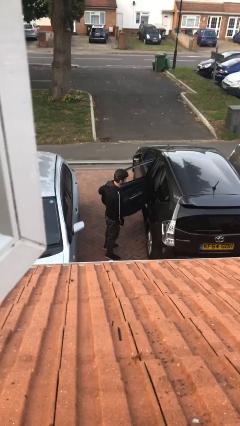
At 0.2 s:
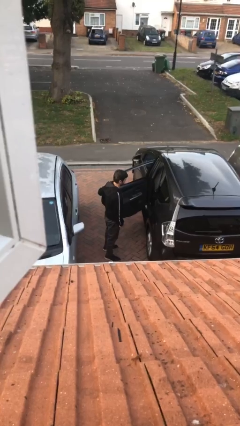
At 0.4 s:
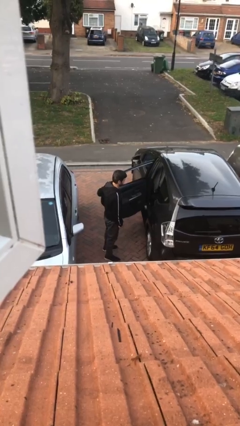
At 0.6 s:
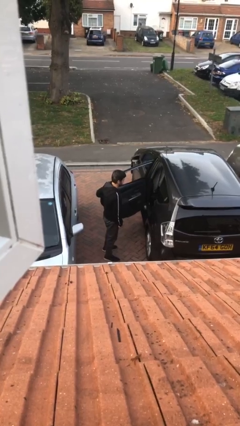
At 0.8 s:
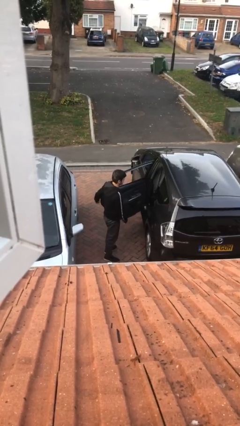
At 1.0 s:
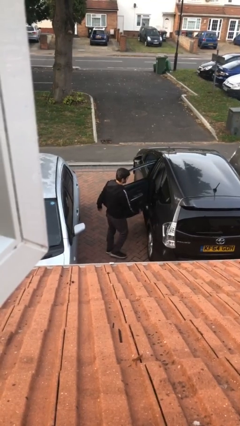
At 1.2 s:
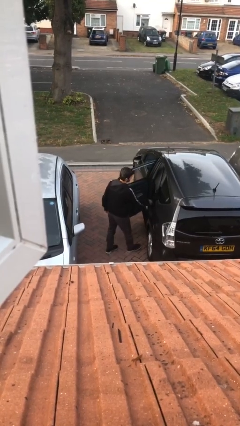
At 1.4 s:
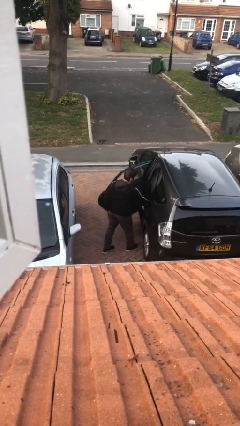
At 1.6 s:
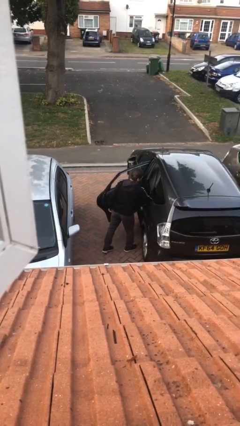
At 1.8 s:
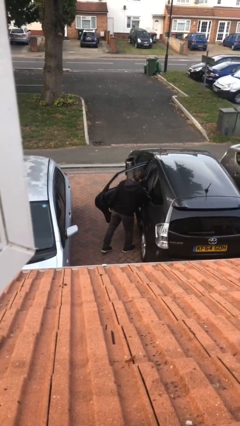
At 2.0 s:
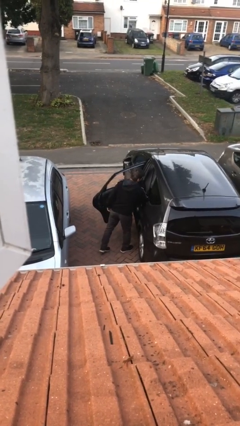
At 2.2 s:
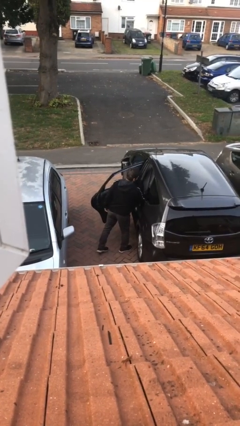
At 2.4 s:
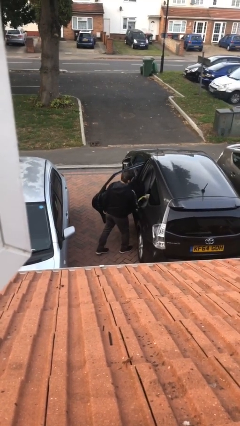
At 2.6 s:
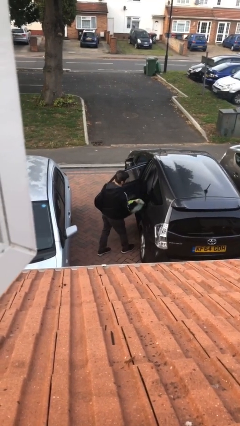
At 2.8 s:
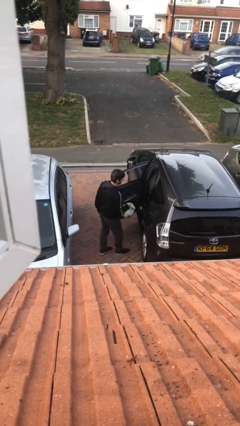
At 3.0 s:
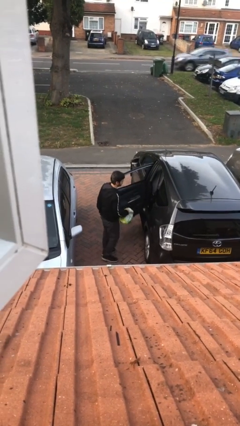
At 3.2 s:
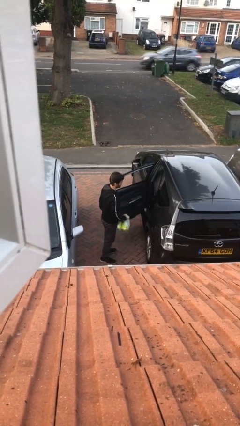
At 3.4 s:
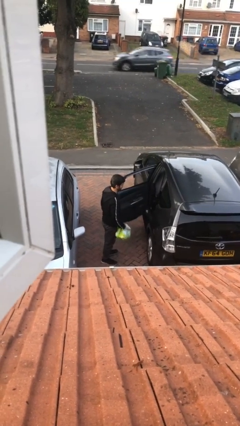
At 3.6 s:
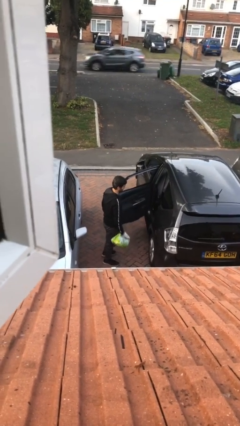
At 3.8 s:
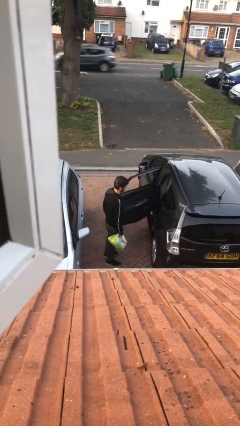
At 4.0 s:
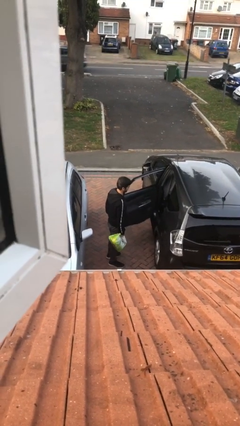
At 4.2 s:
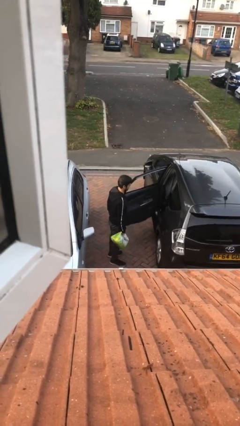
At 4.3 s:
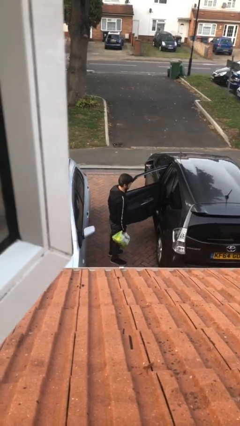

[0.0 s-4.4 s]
person unloads car

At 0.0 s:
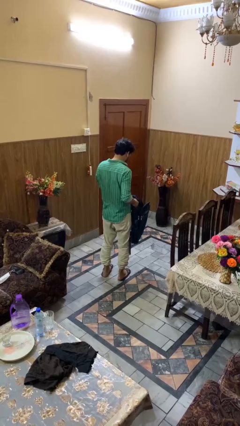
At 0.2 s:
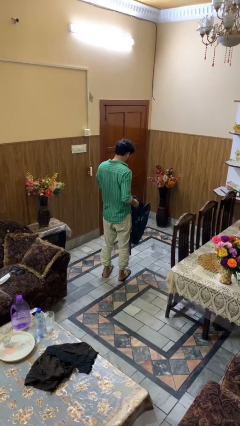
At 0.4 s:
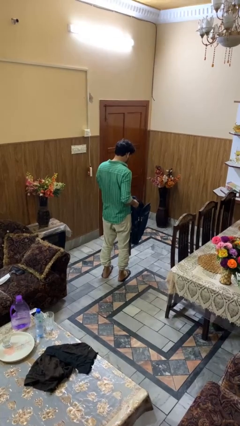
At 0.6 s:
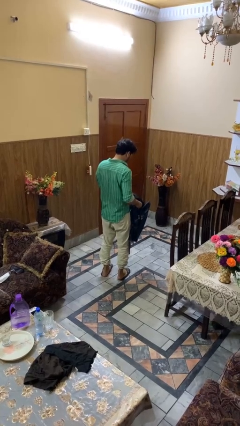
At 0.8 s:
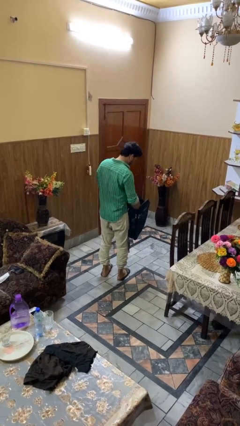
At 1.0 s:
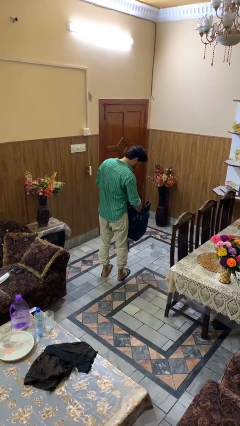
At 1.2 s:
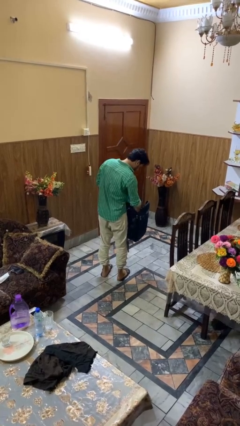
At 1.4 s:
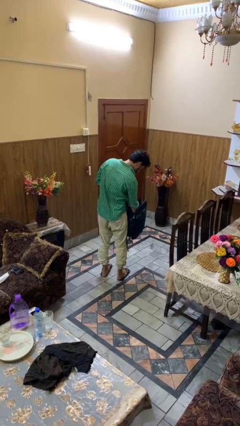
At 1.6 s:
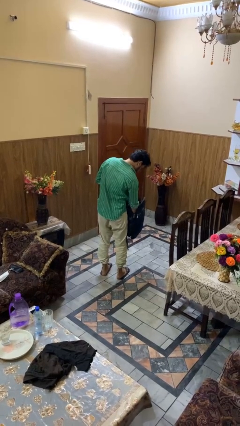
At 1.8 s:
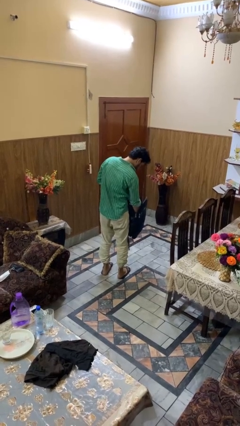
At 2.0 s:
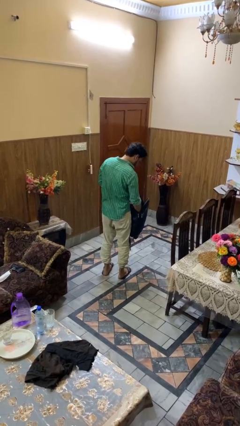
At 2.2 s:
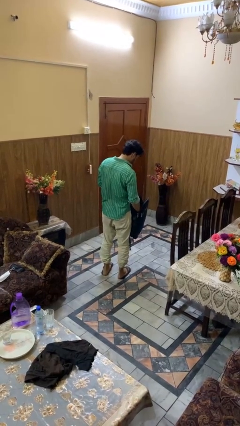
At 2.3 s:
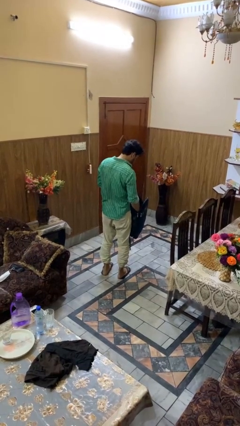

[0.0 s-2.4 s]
person searches in backpack

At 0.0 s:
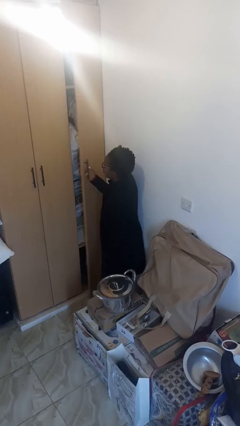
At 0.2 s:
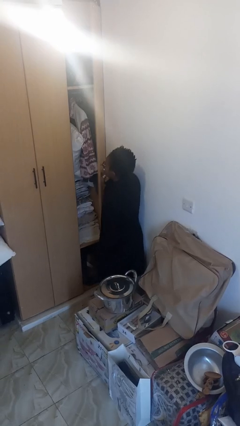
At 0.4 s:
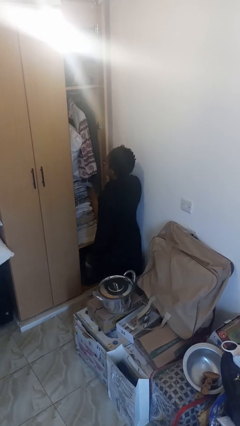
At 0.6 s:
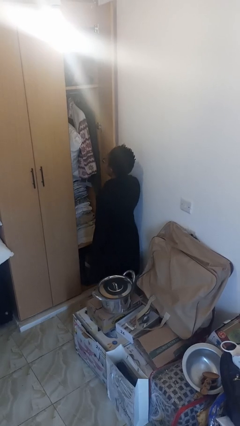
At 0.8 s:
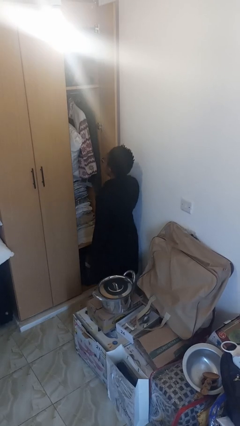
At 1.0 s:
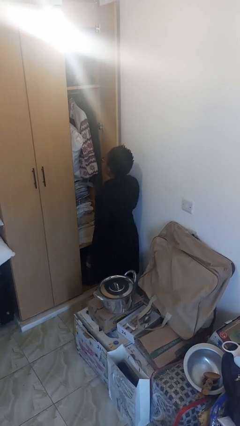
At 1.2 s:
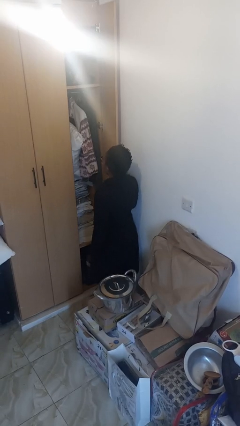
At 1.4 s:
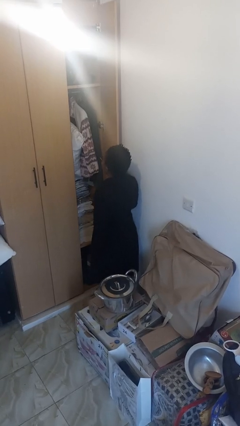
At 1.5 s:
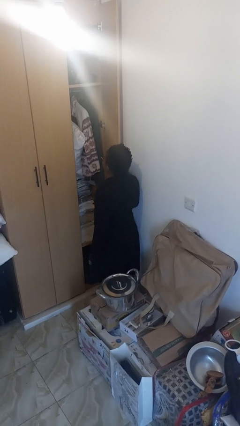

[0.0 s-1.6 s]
person opens closet door

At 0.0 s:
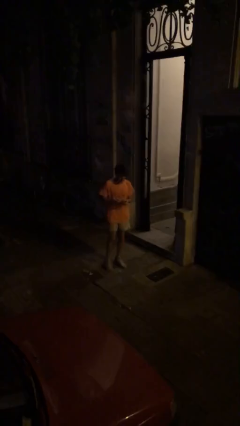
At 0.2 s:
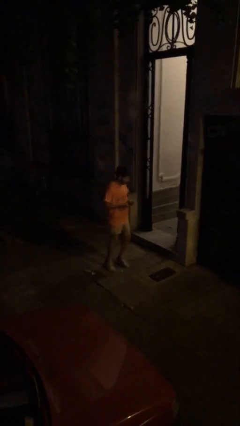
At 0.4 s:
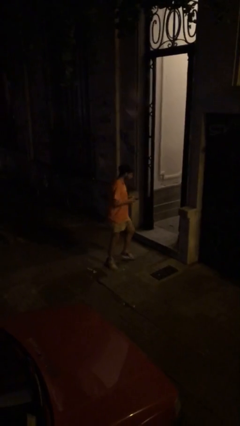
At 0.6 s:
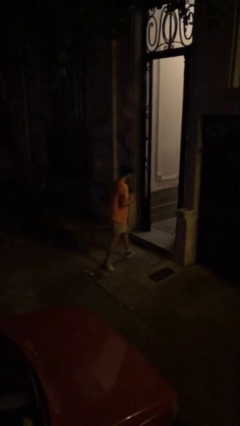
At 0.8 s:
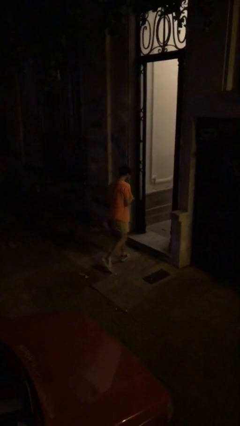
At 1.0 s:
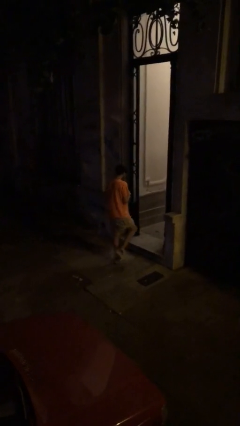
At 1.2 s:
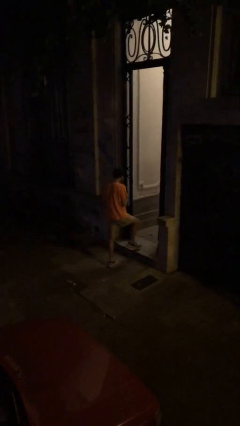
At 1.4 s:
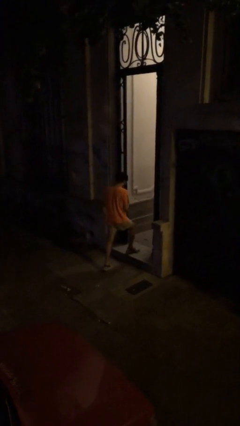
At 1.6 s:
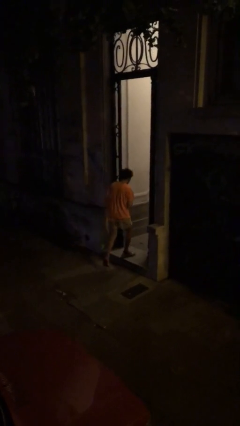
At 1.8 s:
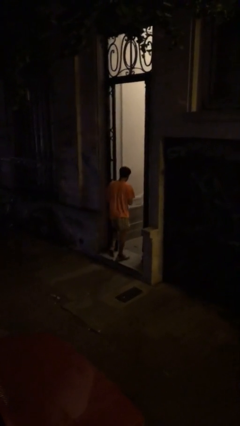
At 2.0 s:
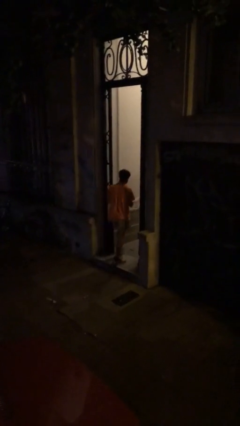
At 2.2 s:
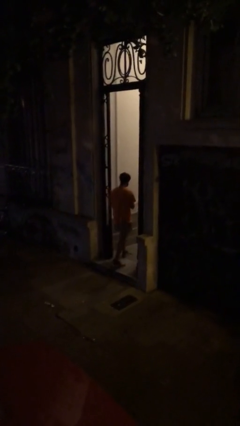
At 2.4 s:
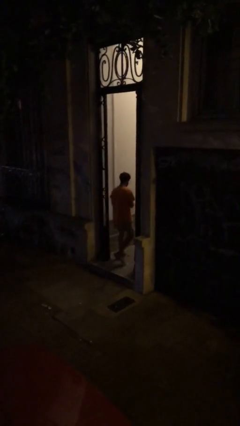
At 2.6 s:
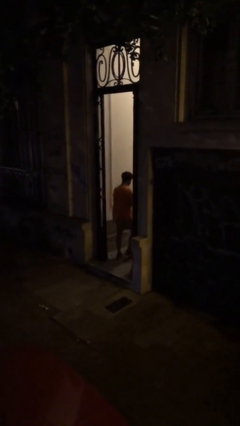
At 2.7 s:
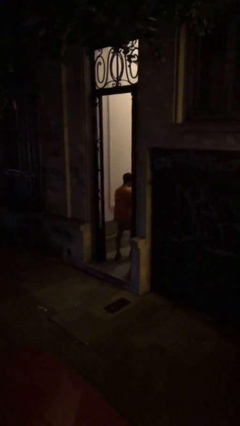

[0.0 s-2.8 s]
person exits scene through structure

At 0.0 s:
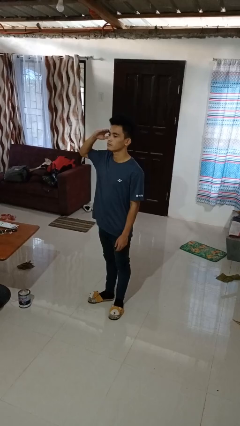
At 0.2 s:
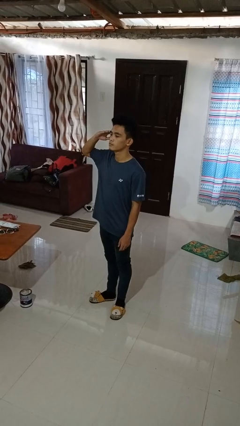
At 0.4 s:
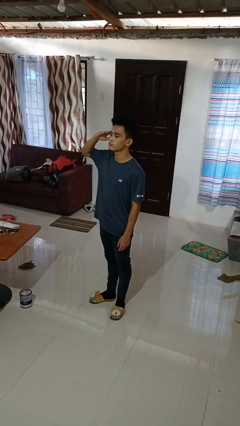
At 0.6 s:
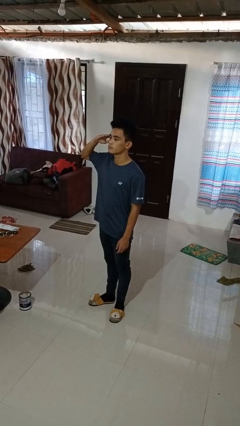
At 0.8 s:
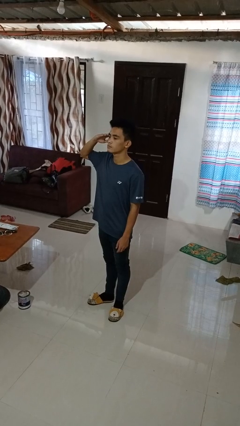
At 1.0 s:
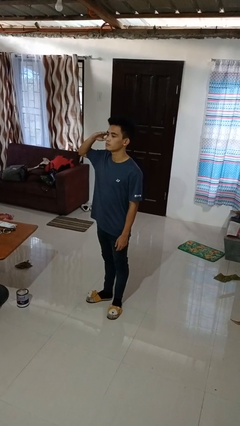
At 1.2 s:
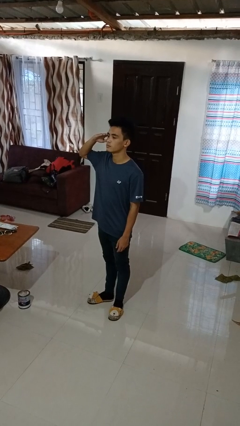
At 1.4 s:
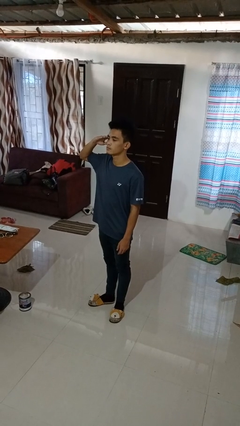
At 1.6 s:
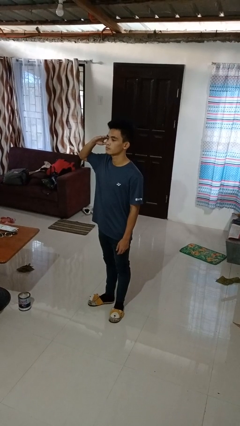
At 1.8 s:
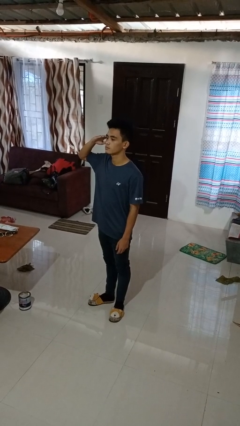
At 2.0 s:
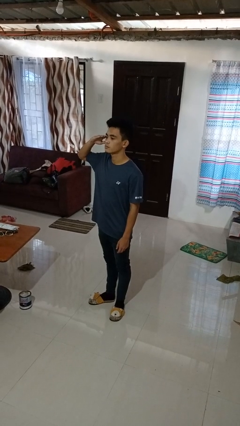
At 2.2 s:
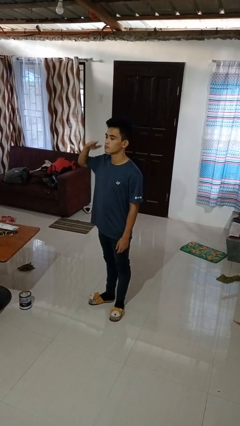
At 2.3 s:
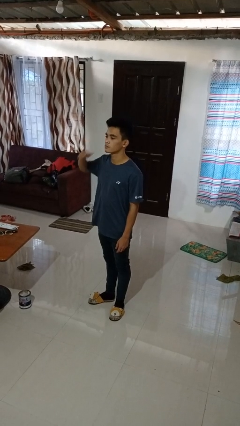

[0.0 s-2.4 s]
person salutes

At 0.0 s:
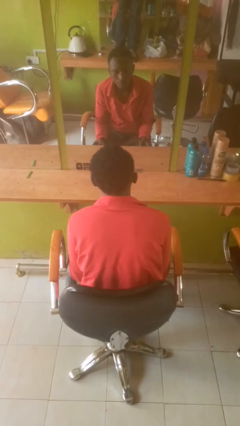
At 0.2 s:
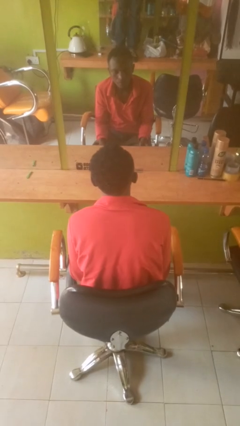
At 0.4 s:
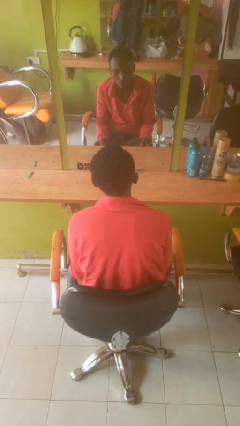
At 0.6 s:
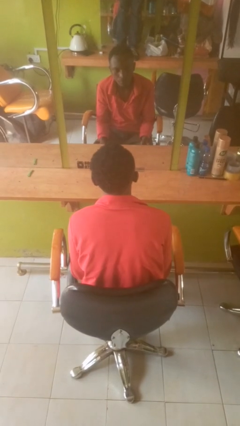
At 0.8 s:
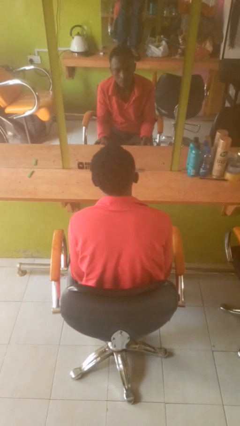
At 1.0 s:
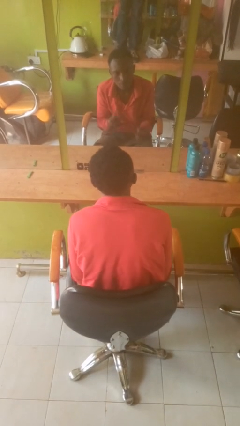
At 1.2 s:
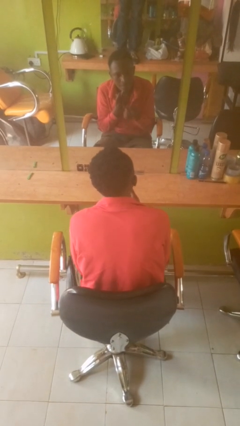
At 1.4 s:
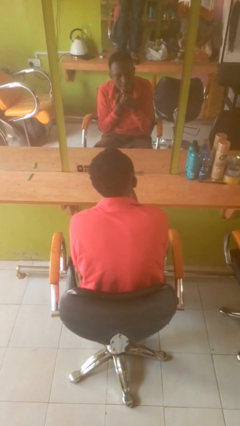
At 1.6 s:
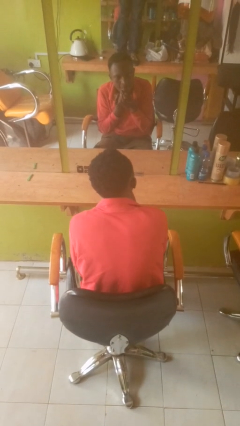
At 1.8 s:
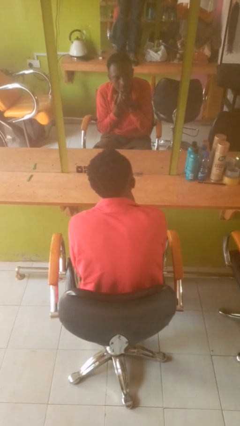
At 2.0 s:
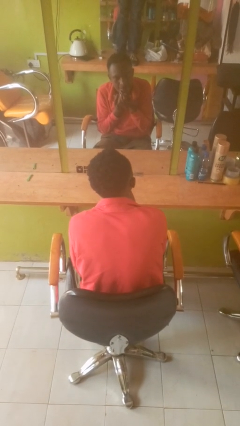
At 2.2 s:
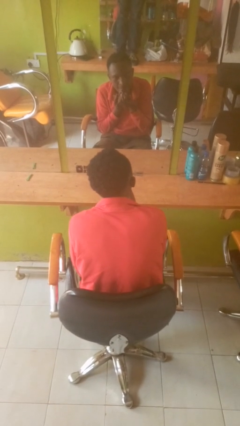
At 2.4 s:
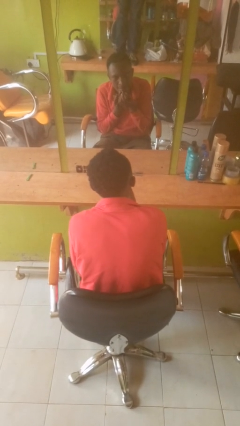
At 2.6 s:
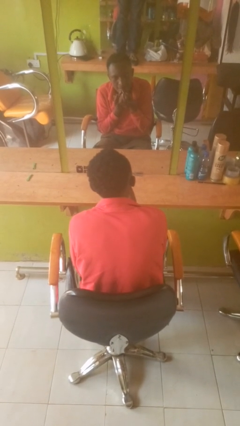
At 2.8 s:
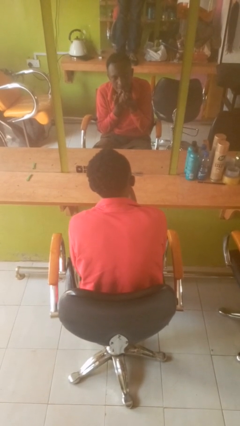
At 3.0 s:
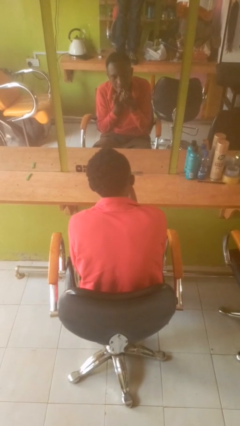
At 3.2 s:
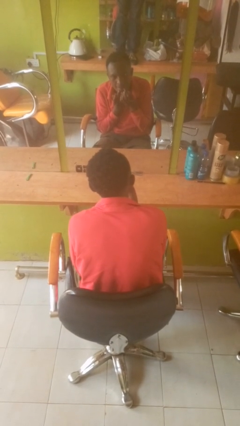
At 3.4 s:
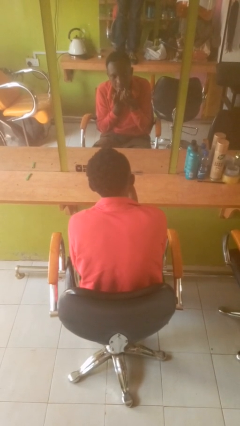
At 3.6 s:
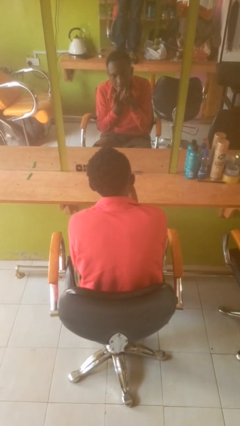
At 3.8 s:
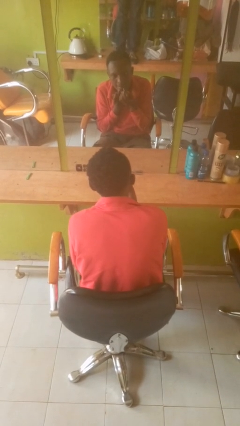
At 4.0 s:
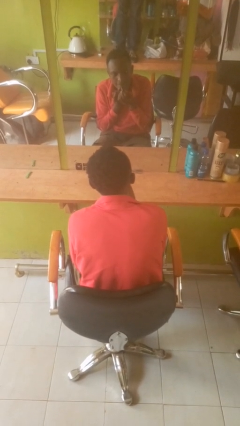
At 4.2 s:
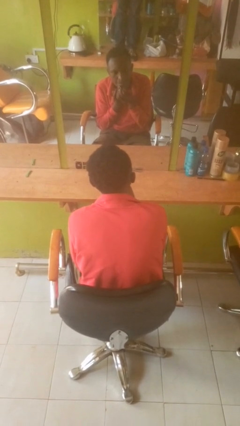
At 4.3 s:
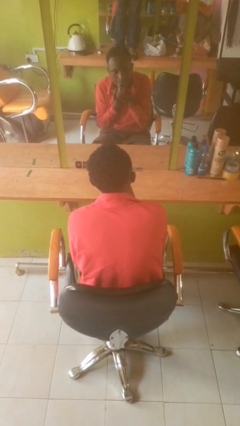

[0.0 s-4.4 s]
person applies lip makeup
